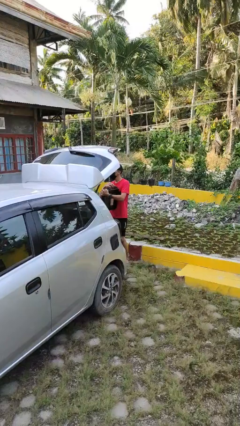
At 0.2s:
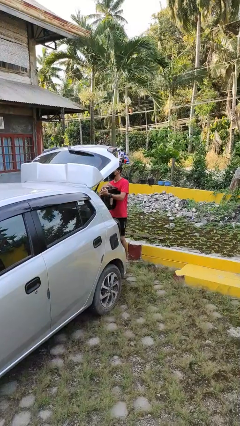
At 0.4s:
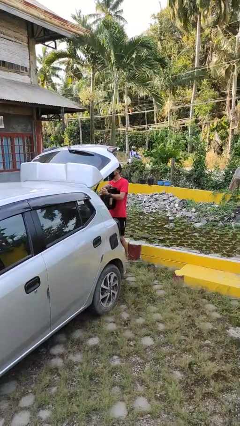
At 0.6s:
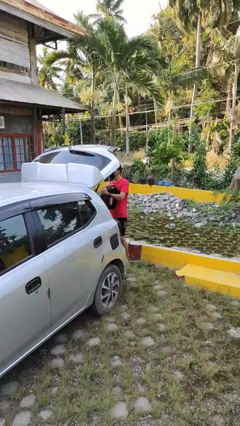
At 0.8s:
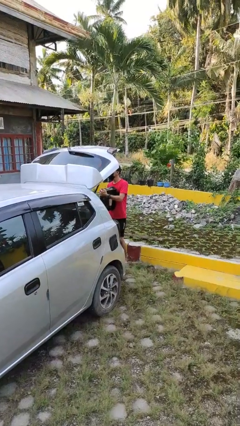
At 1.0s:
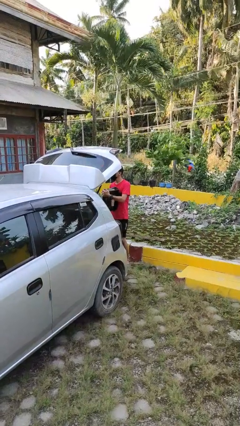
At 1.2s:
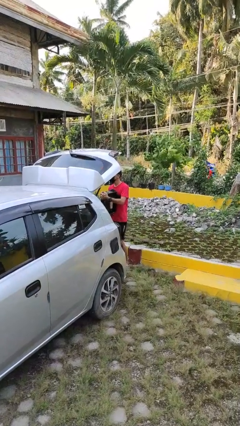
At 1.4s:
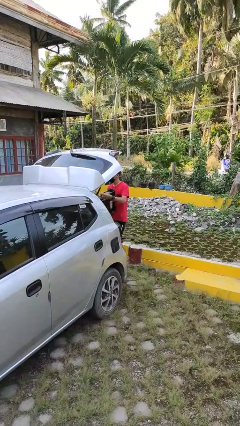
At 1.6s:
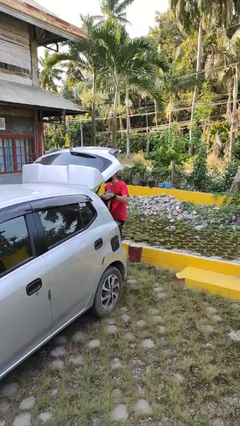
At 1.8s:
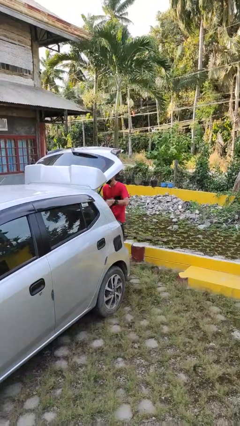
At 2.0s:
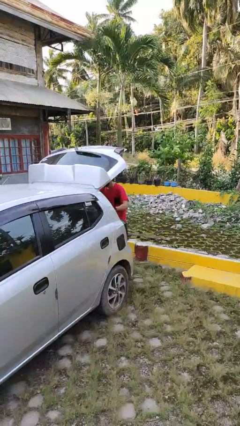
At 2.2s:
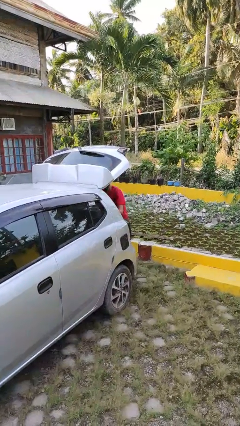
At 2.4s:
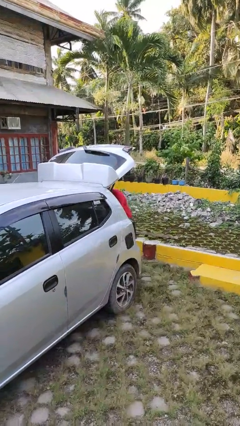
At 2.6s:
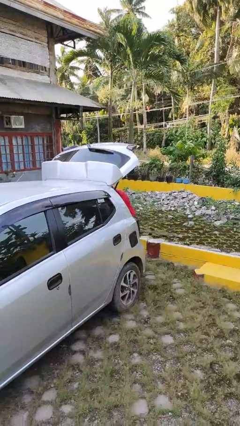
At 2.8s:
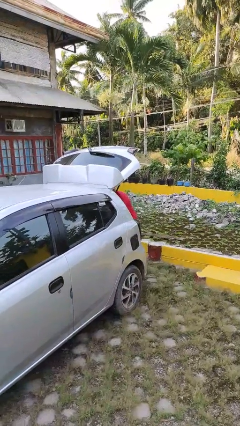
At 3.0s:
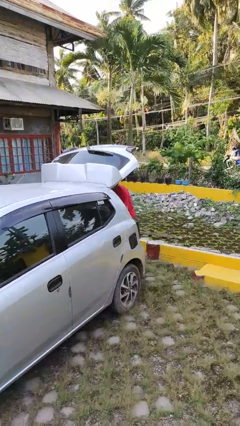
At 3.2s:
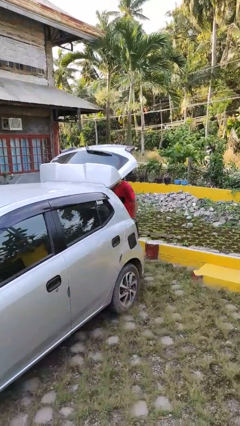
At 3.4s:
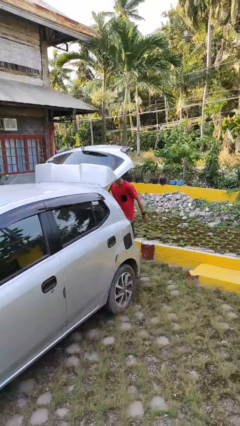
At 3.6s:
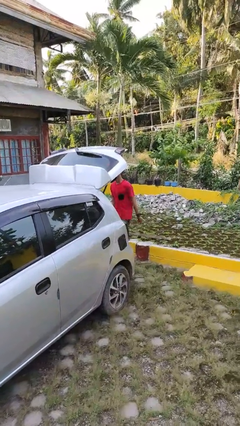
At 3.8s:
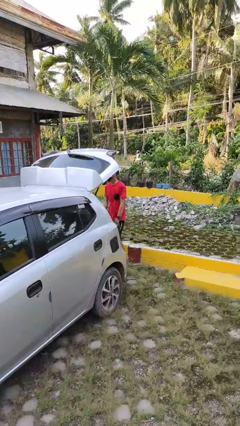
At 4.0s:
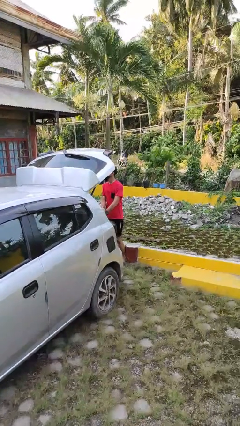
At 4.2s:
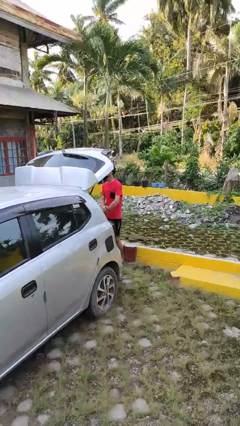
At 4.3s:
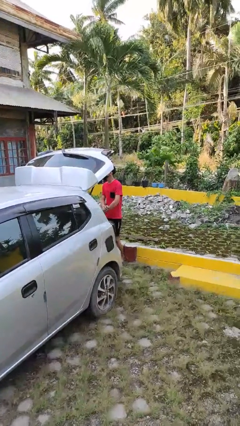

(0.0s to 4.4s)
person loads car

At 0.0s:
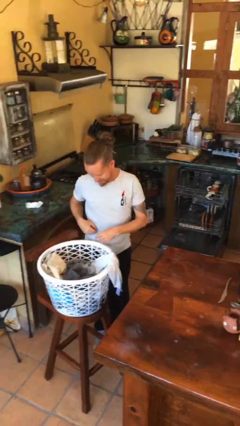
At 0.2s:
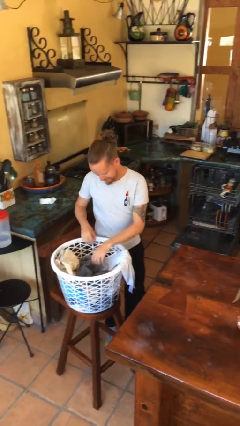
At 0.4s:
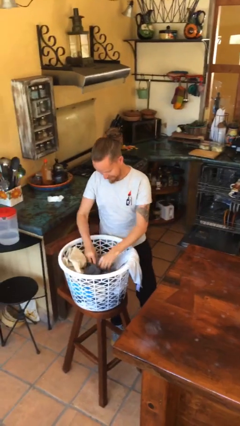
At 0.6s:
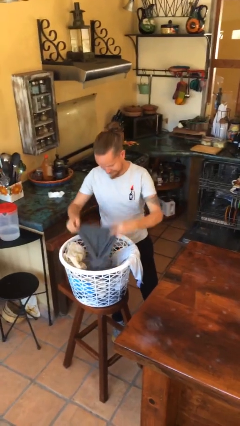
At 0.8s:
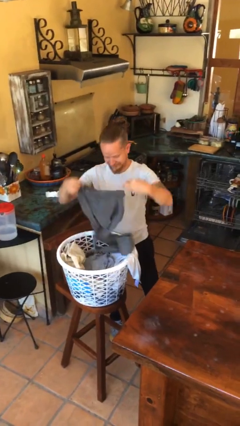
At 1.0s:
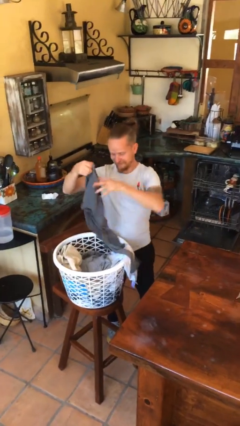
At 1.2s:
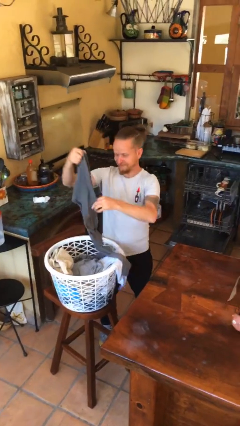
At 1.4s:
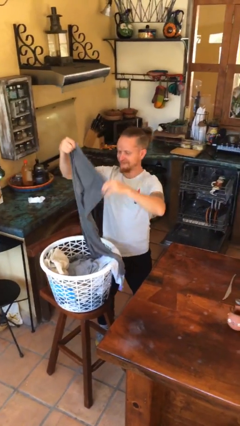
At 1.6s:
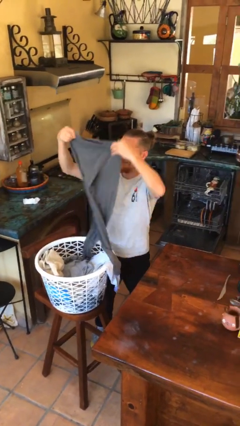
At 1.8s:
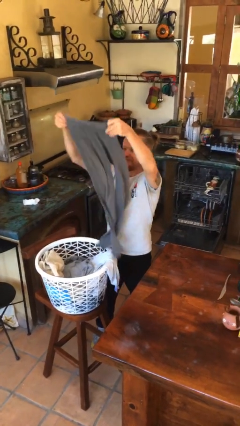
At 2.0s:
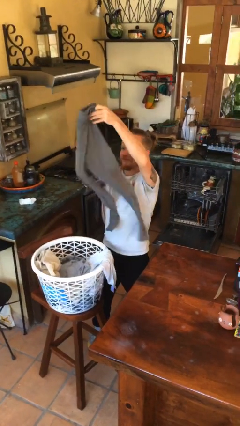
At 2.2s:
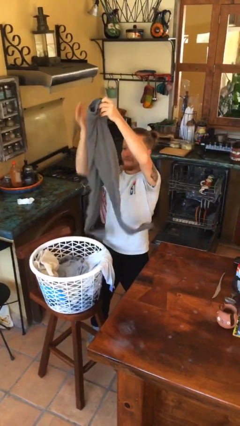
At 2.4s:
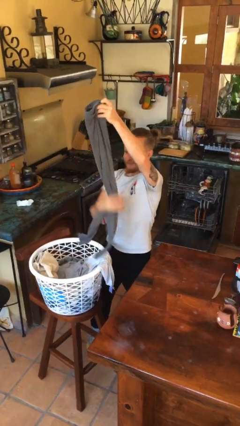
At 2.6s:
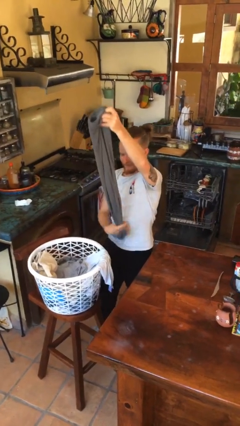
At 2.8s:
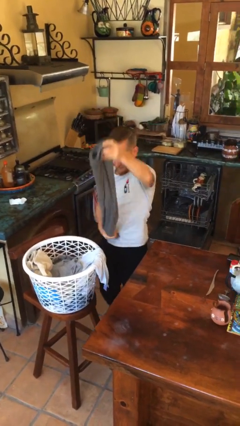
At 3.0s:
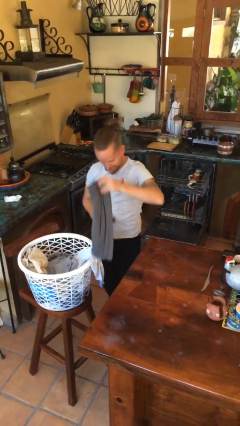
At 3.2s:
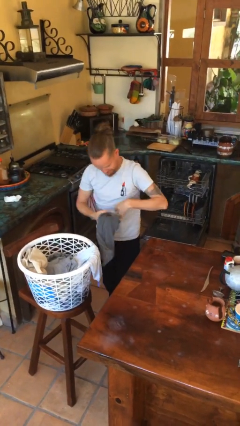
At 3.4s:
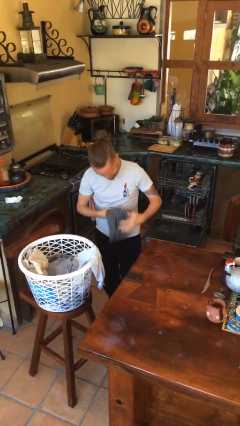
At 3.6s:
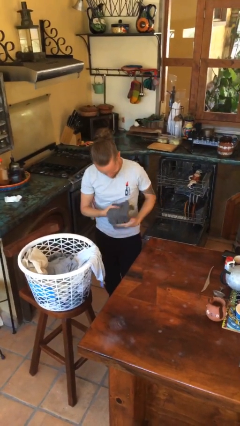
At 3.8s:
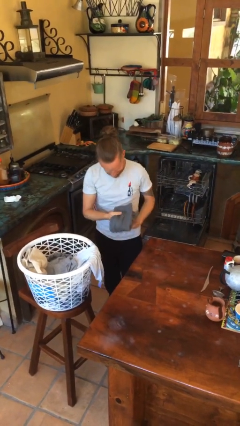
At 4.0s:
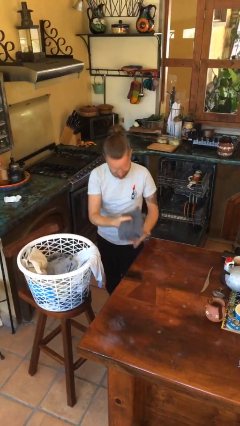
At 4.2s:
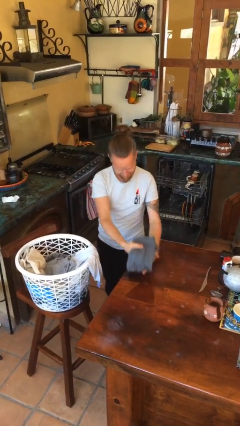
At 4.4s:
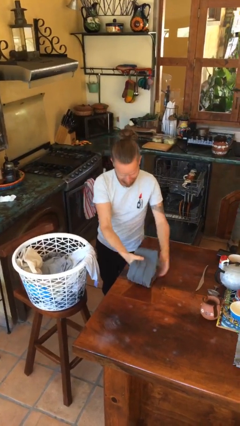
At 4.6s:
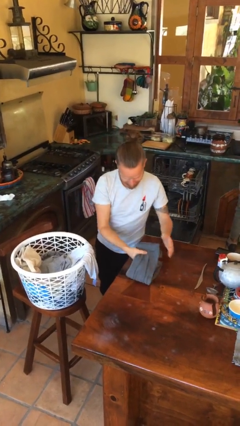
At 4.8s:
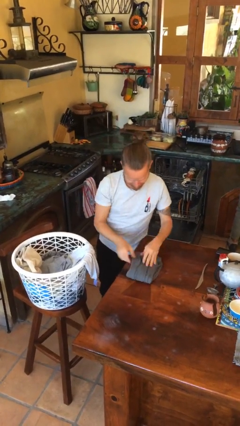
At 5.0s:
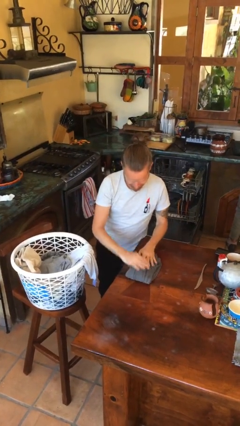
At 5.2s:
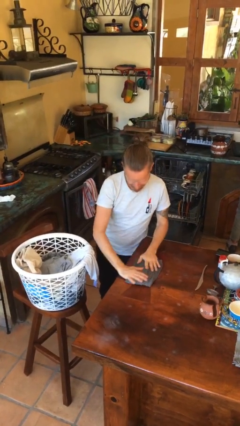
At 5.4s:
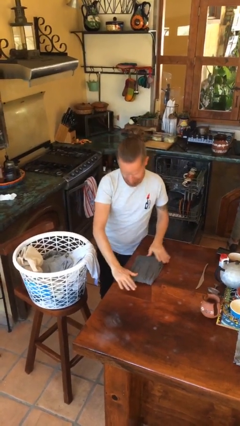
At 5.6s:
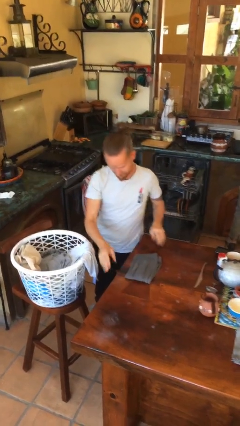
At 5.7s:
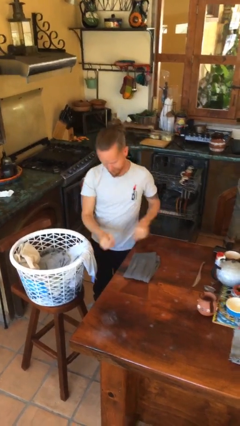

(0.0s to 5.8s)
person folds pants

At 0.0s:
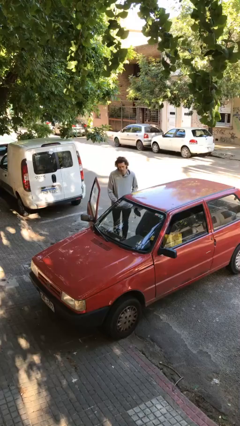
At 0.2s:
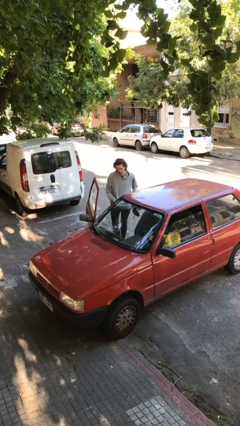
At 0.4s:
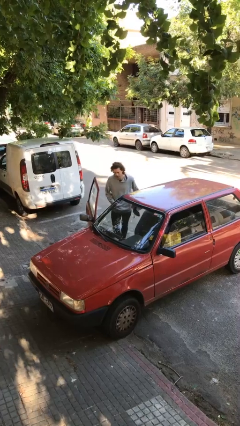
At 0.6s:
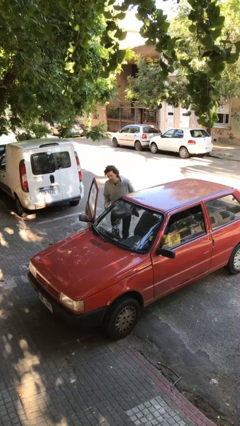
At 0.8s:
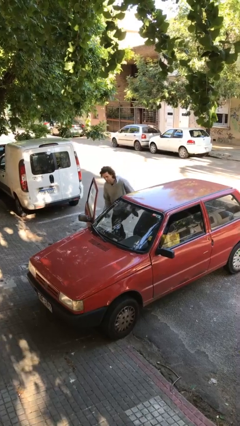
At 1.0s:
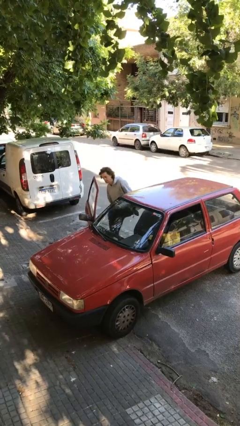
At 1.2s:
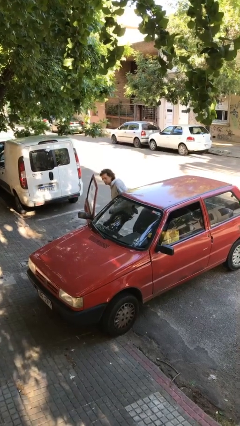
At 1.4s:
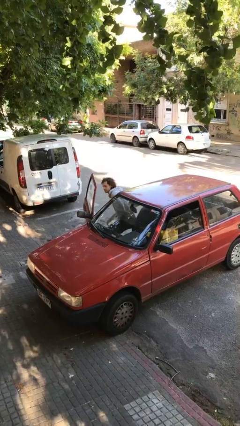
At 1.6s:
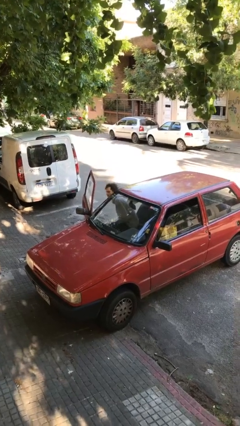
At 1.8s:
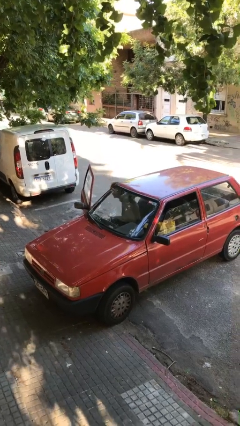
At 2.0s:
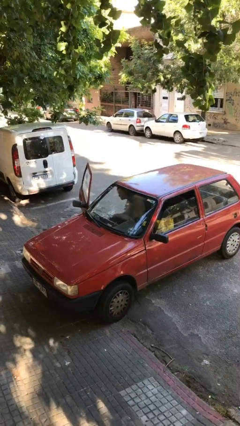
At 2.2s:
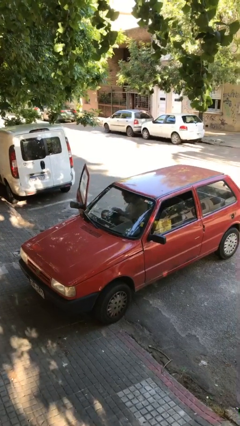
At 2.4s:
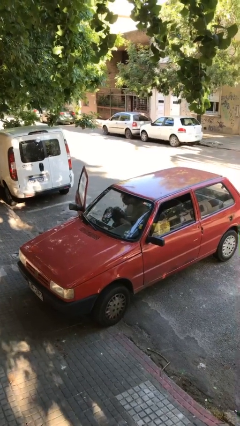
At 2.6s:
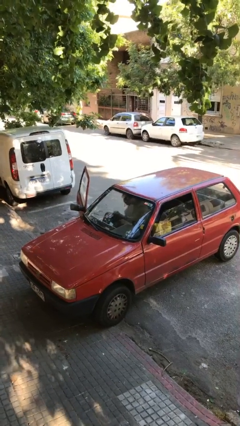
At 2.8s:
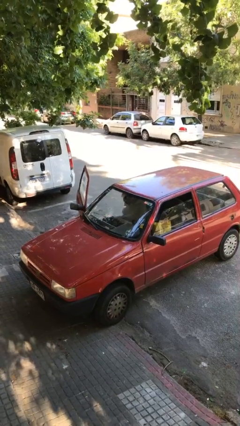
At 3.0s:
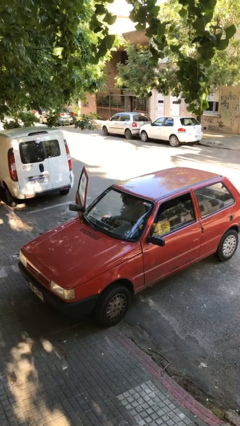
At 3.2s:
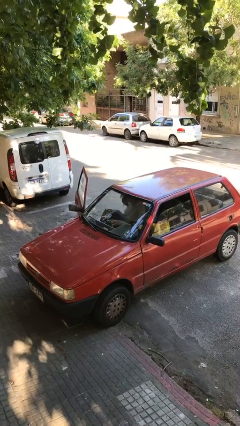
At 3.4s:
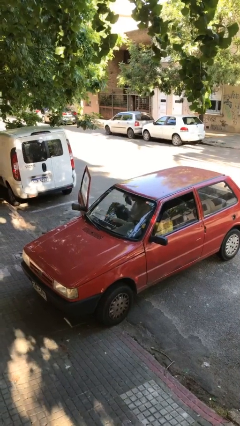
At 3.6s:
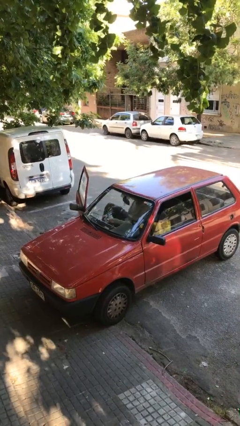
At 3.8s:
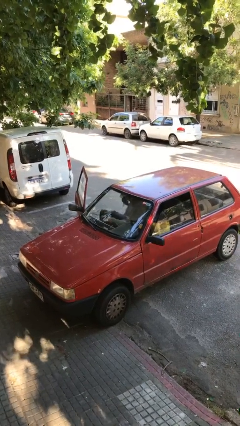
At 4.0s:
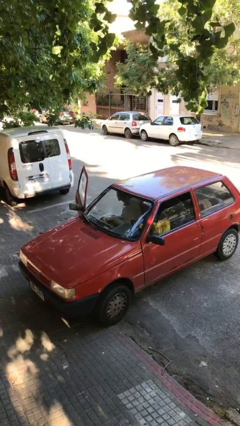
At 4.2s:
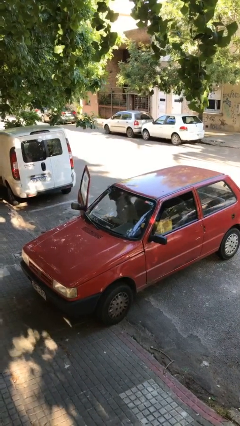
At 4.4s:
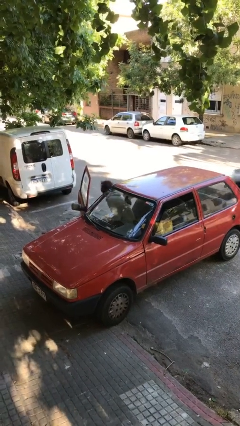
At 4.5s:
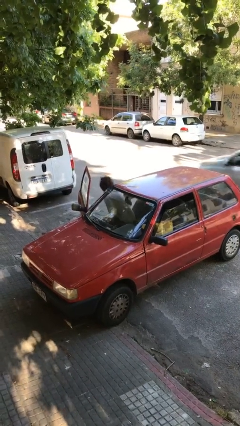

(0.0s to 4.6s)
person enters car

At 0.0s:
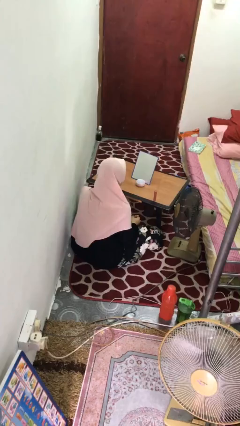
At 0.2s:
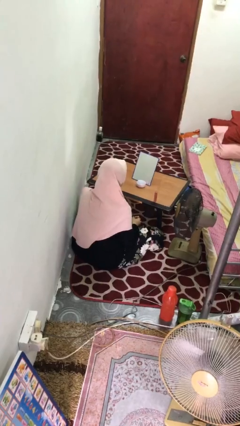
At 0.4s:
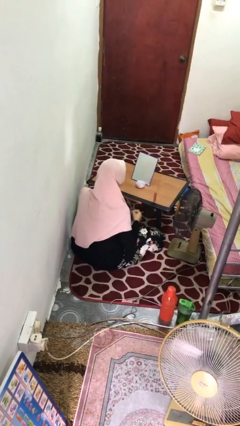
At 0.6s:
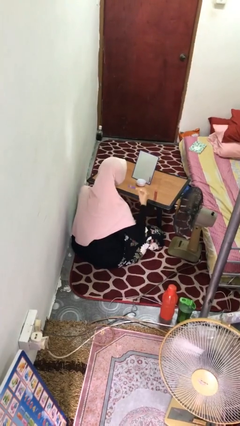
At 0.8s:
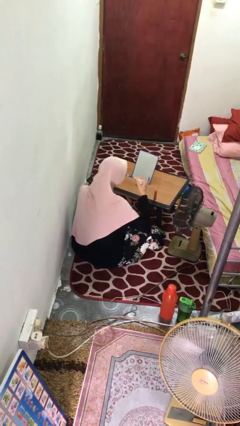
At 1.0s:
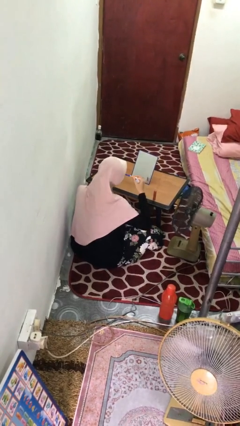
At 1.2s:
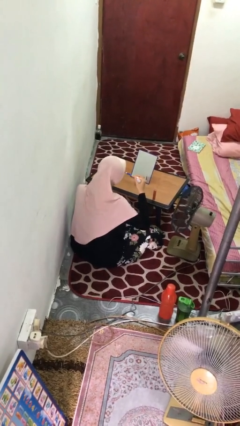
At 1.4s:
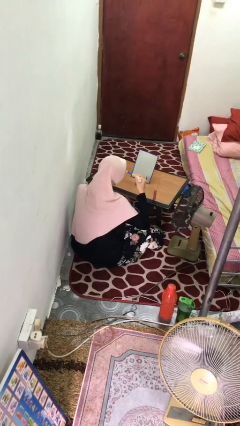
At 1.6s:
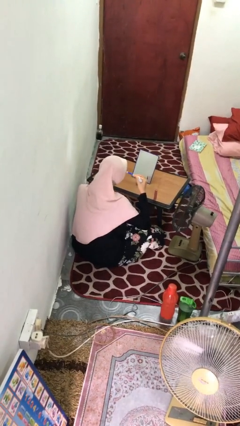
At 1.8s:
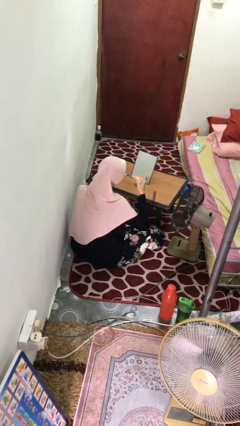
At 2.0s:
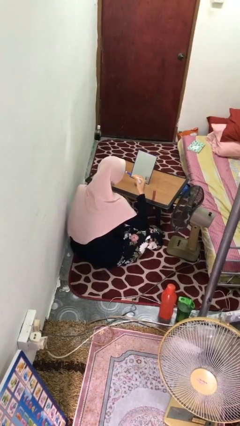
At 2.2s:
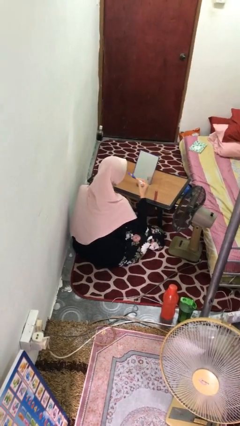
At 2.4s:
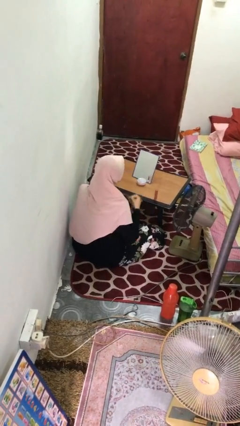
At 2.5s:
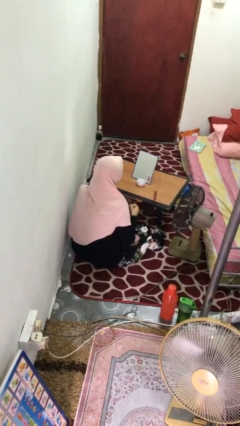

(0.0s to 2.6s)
person applies eye makeup

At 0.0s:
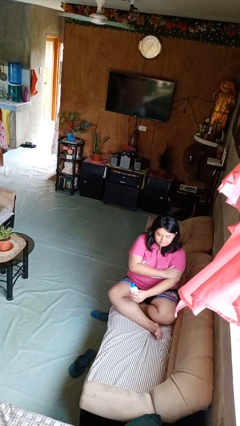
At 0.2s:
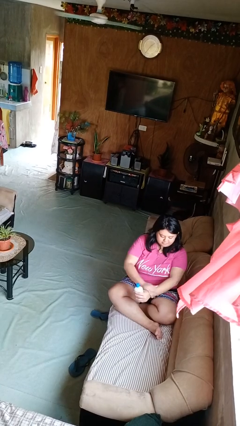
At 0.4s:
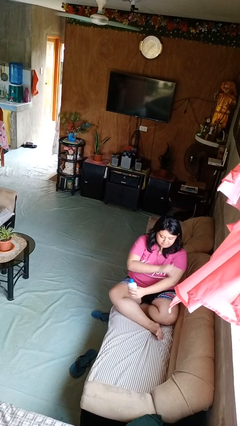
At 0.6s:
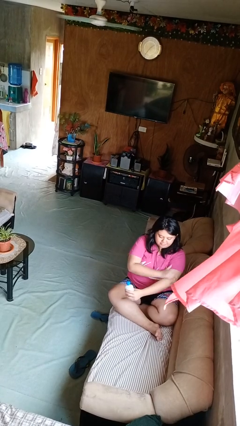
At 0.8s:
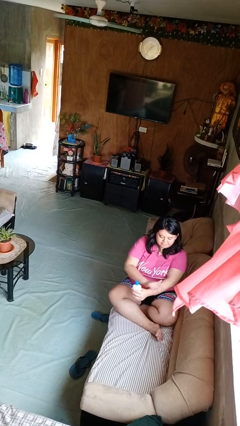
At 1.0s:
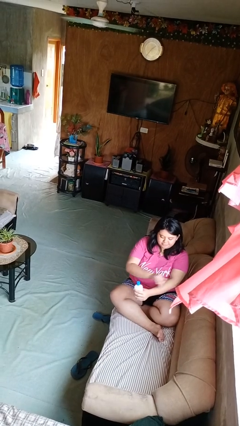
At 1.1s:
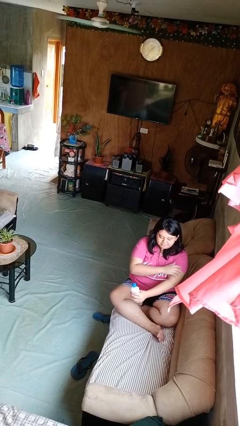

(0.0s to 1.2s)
person applies sunscreen
